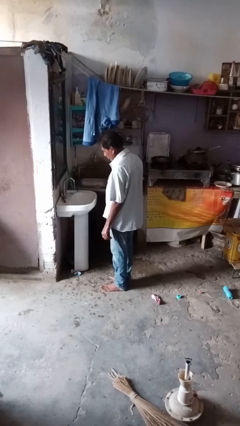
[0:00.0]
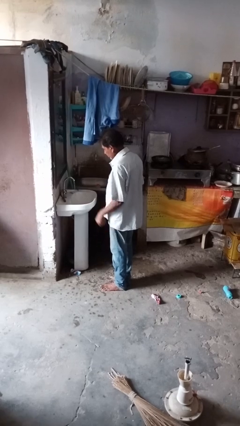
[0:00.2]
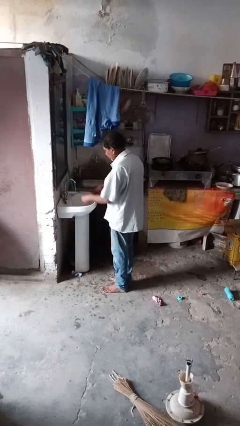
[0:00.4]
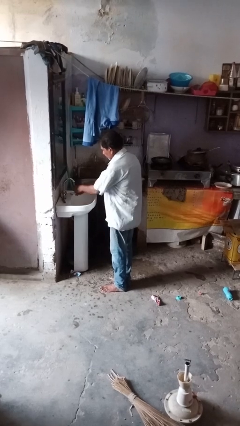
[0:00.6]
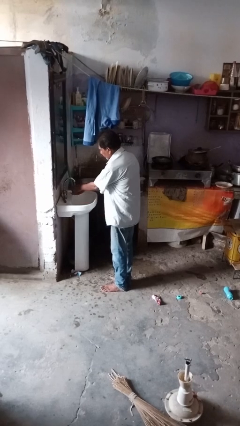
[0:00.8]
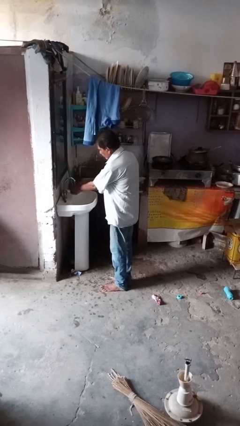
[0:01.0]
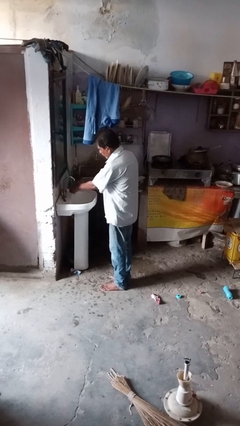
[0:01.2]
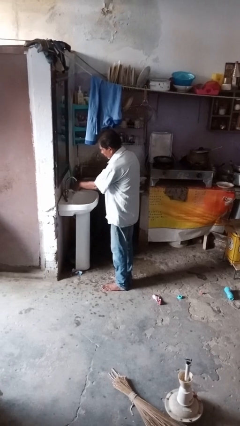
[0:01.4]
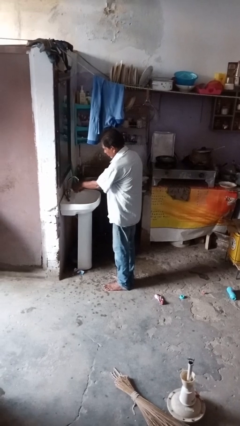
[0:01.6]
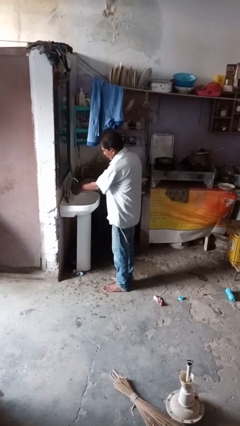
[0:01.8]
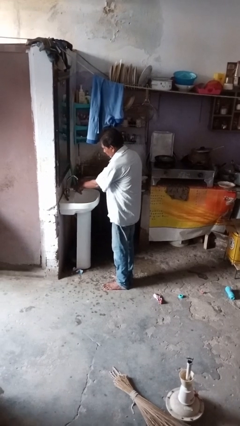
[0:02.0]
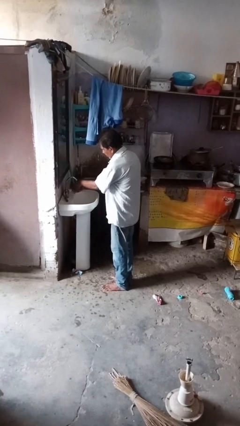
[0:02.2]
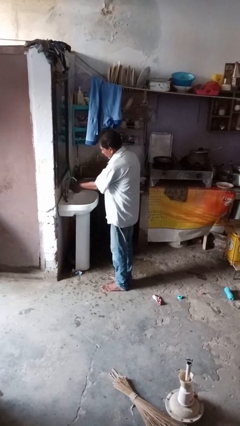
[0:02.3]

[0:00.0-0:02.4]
person washes hands

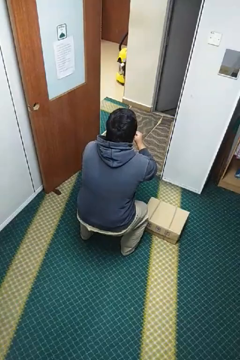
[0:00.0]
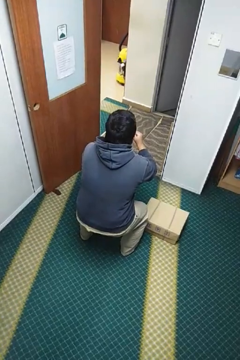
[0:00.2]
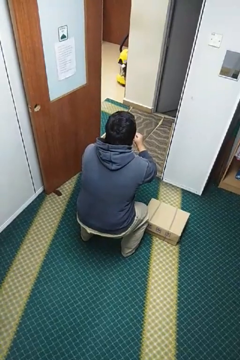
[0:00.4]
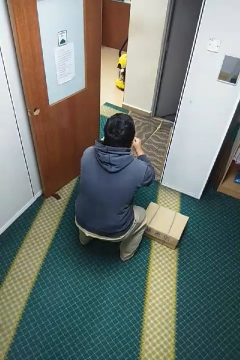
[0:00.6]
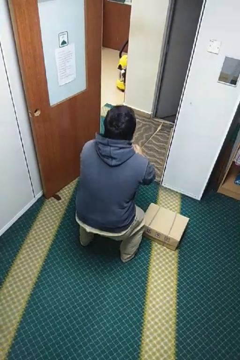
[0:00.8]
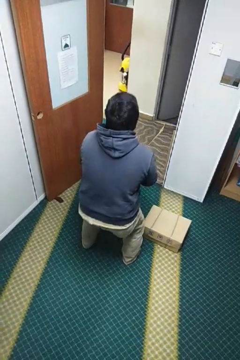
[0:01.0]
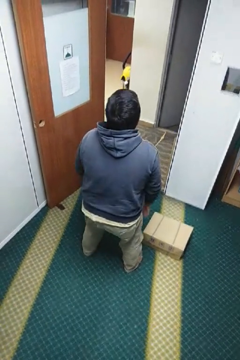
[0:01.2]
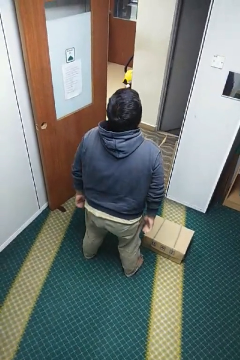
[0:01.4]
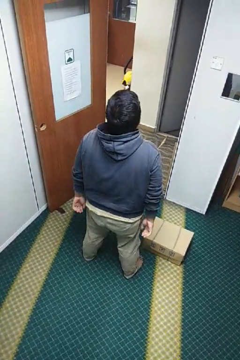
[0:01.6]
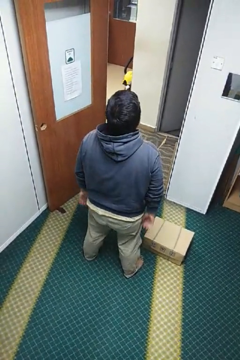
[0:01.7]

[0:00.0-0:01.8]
person stands up

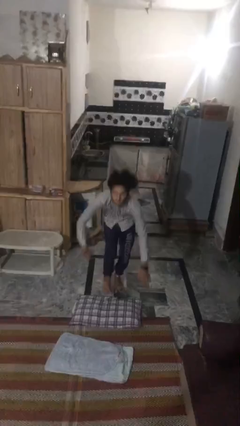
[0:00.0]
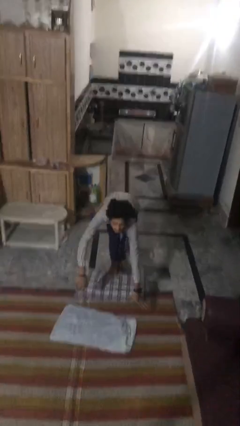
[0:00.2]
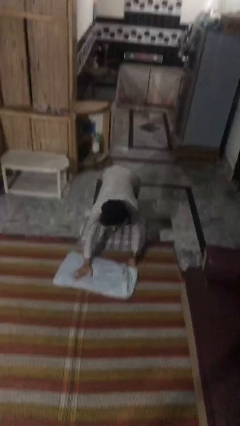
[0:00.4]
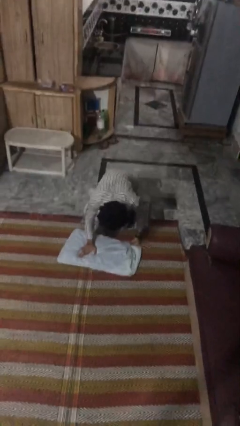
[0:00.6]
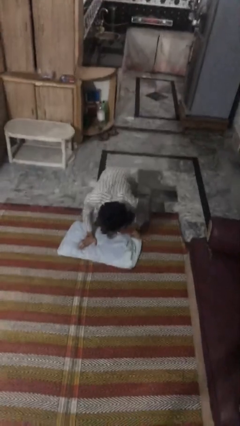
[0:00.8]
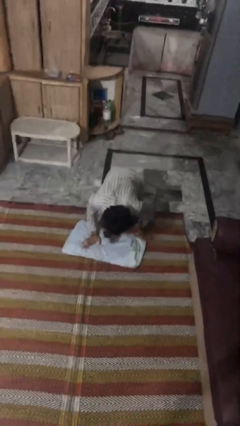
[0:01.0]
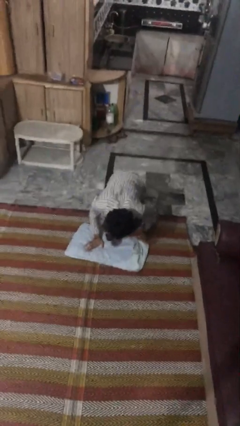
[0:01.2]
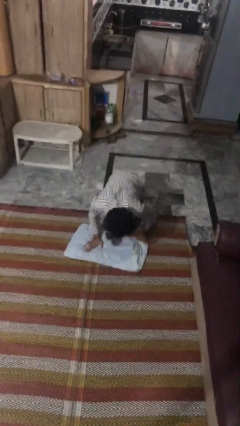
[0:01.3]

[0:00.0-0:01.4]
person trips on object on floor

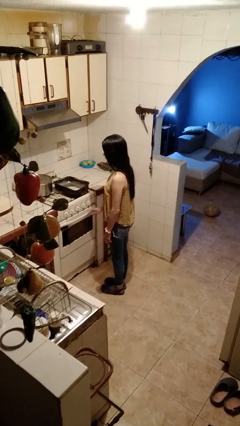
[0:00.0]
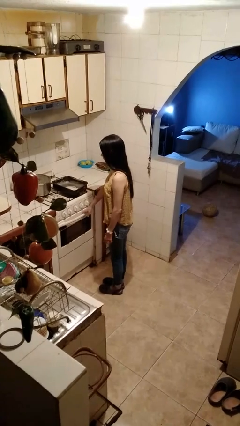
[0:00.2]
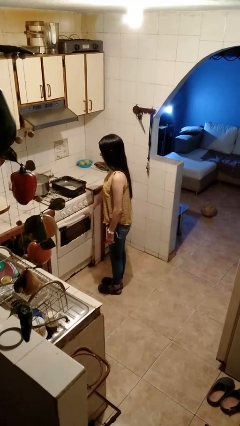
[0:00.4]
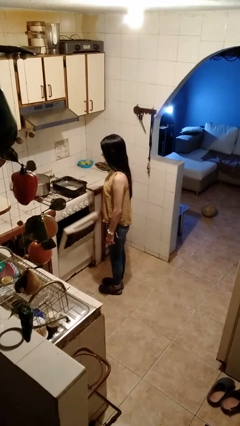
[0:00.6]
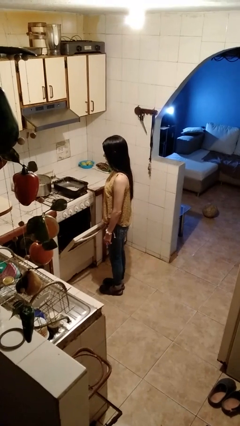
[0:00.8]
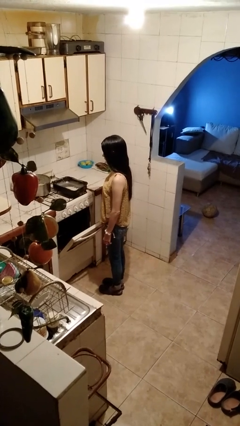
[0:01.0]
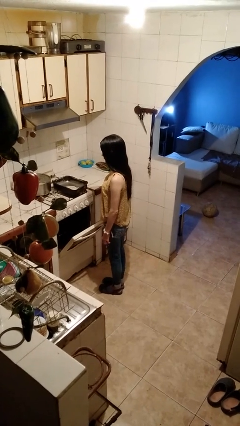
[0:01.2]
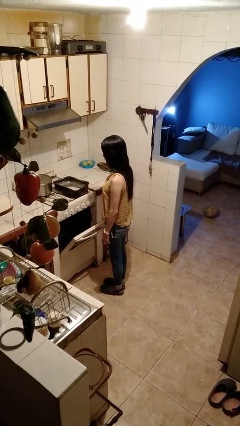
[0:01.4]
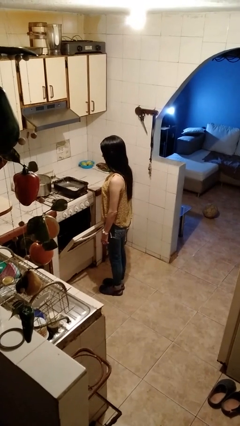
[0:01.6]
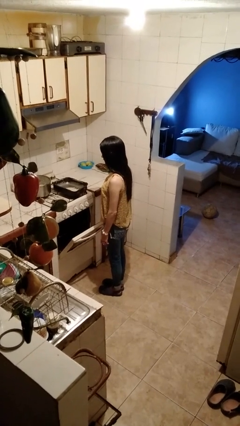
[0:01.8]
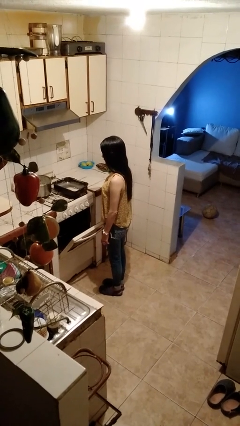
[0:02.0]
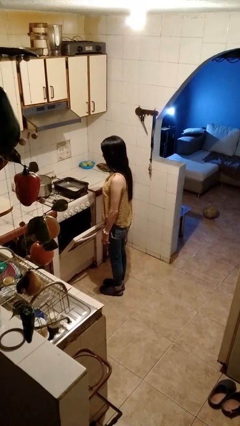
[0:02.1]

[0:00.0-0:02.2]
person opens oven door

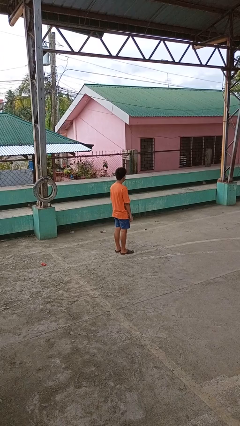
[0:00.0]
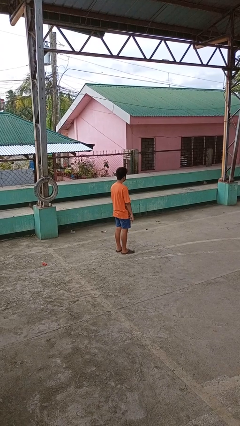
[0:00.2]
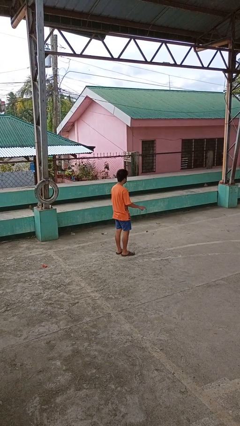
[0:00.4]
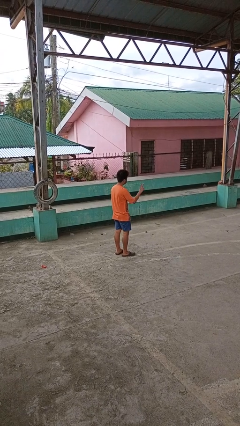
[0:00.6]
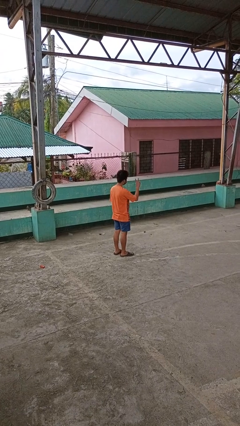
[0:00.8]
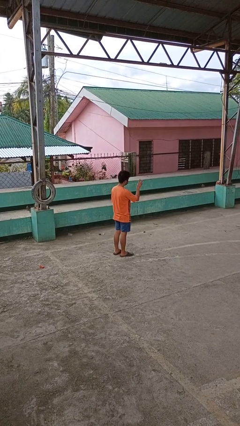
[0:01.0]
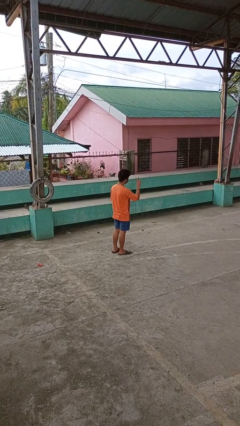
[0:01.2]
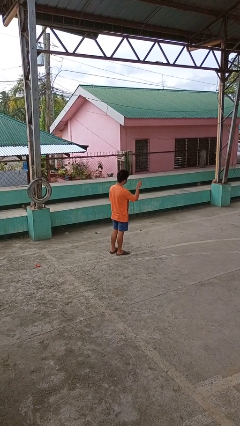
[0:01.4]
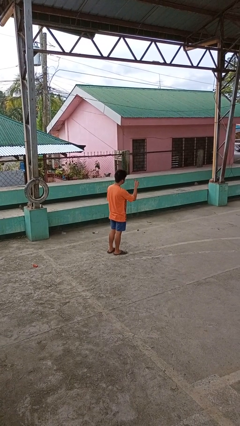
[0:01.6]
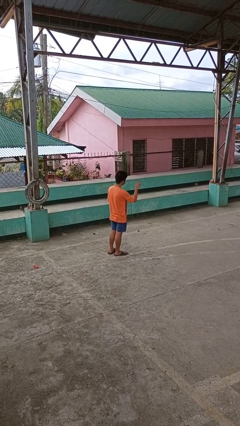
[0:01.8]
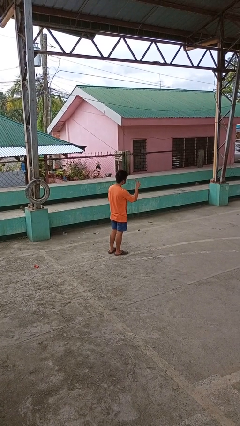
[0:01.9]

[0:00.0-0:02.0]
person gestures peace

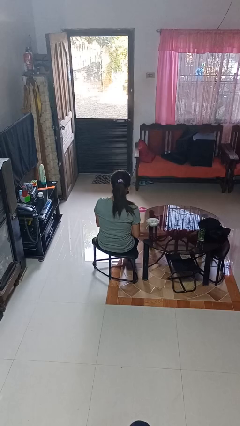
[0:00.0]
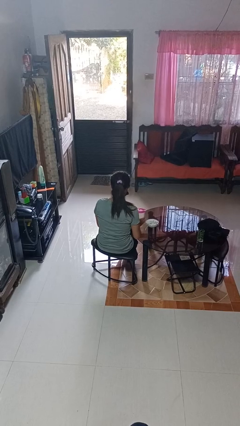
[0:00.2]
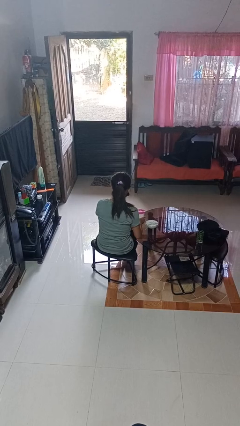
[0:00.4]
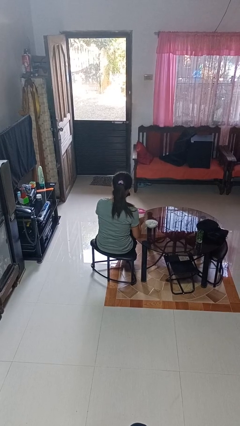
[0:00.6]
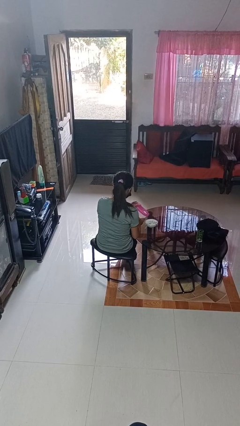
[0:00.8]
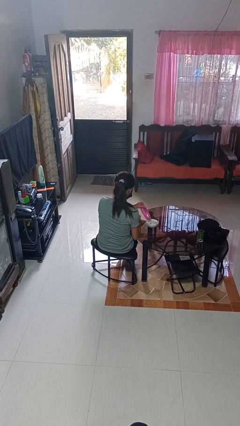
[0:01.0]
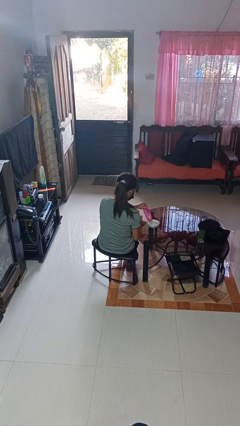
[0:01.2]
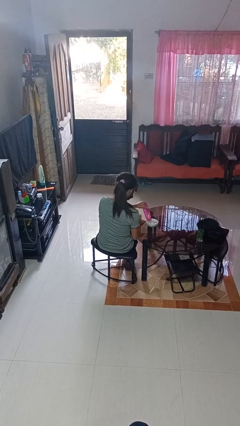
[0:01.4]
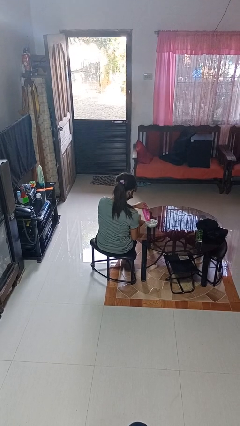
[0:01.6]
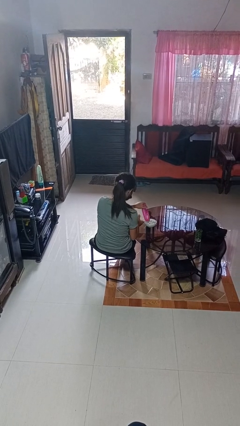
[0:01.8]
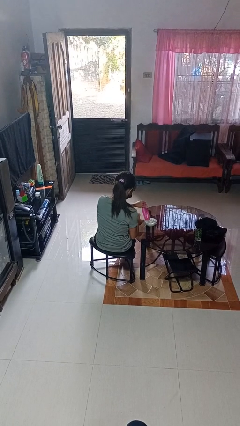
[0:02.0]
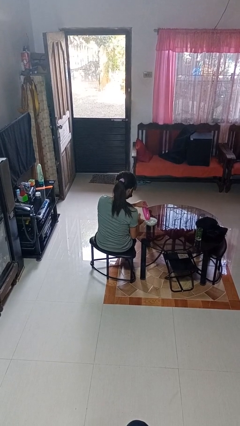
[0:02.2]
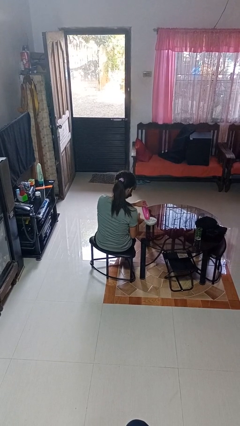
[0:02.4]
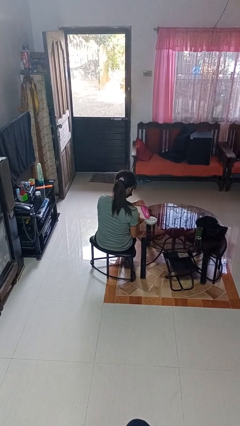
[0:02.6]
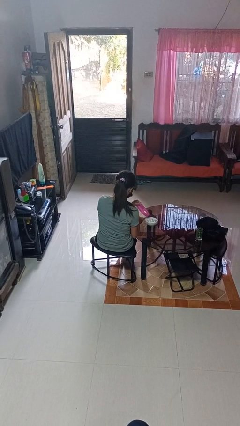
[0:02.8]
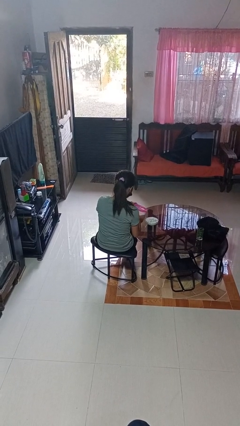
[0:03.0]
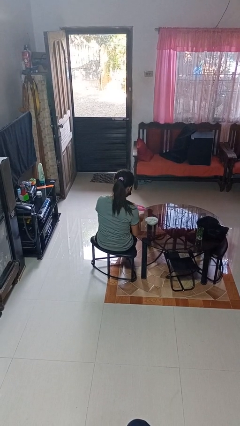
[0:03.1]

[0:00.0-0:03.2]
person pours into bowl

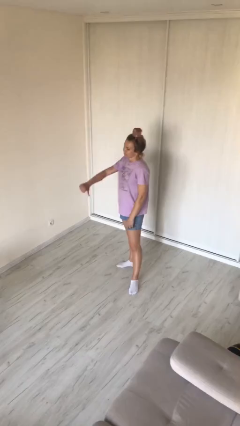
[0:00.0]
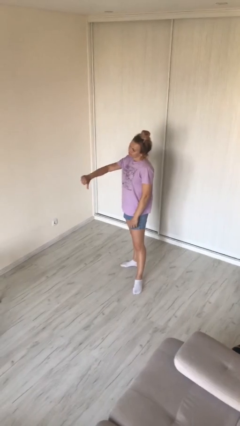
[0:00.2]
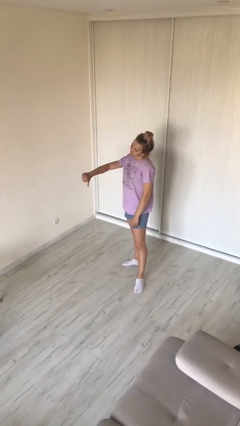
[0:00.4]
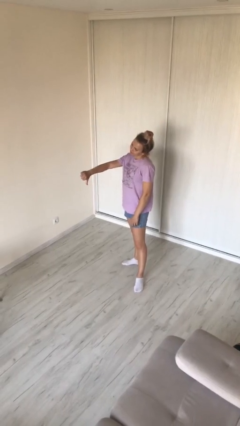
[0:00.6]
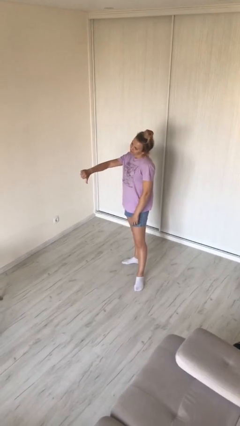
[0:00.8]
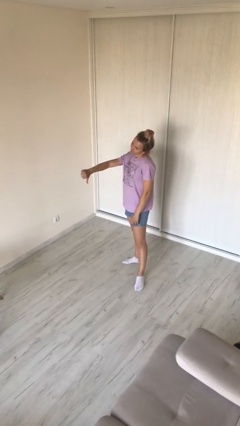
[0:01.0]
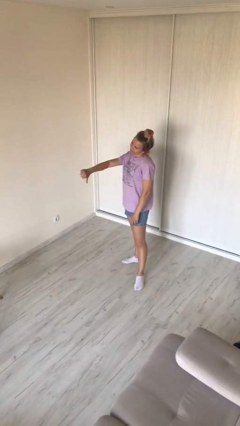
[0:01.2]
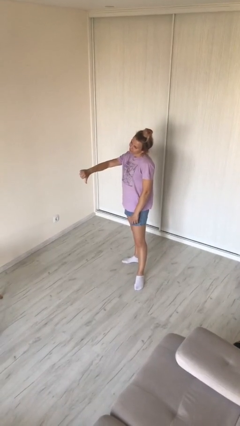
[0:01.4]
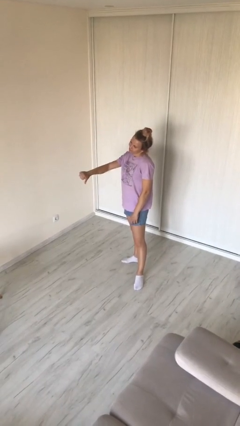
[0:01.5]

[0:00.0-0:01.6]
person gestures thumbs down

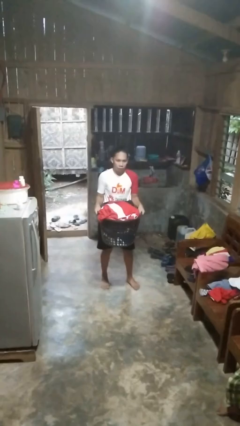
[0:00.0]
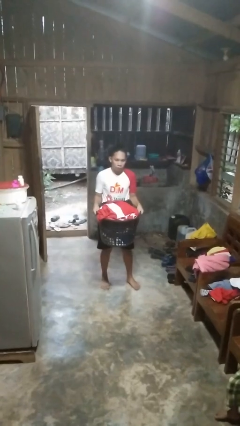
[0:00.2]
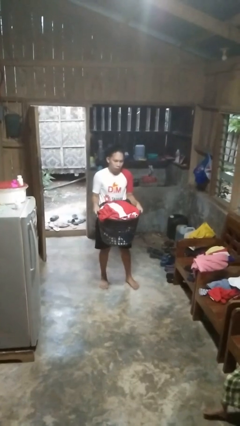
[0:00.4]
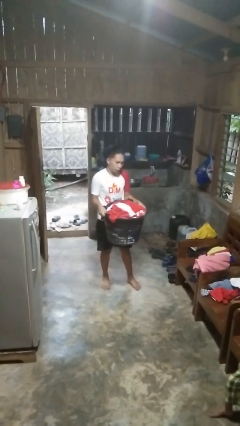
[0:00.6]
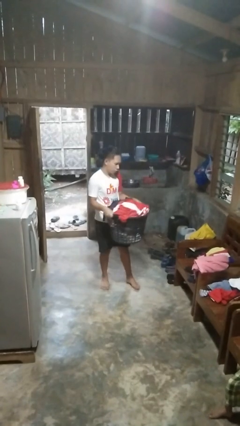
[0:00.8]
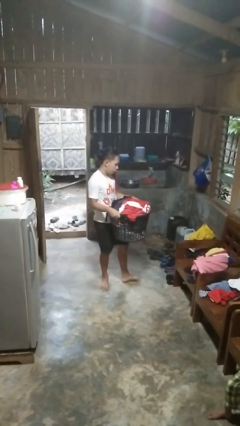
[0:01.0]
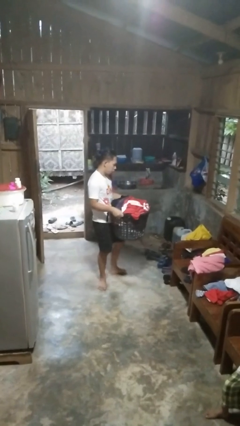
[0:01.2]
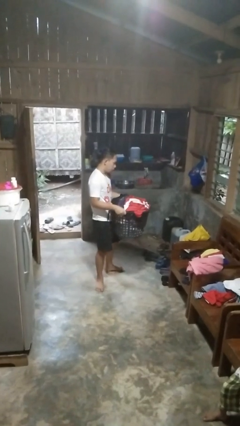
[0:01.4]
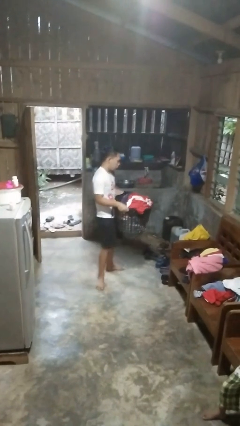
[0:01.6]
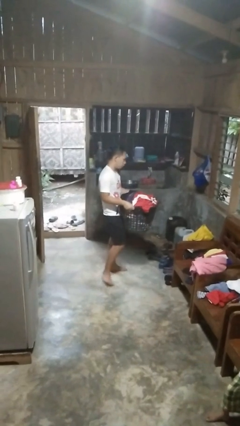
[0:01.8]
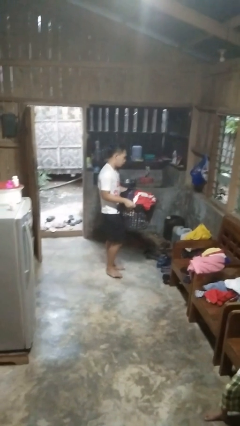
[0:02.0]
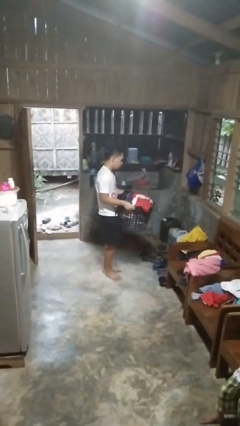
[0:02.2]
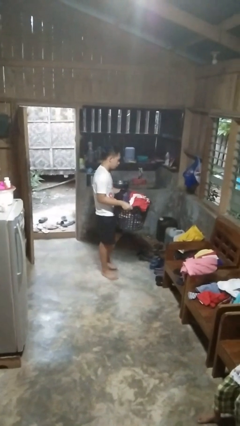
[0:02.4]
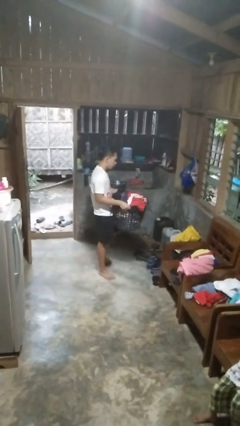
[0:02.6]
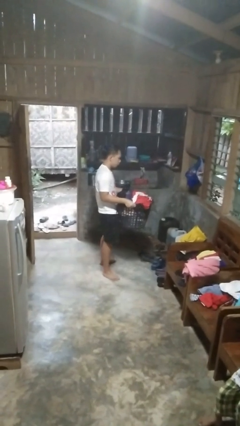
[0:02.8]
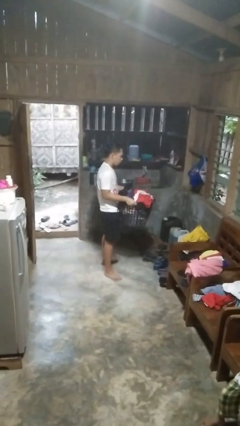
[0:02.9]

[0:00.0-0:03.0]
person carries laundry basket
